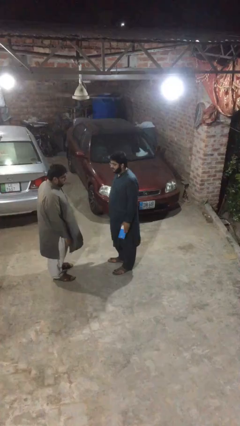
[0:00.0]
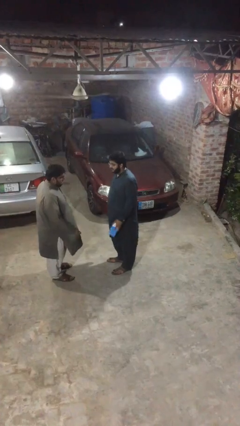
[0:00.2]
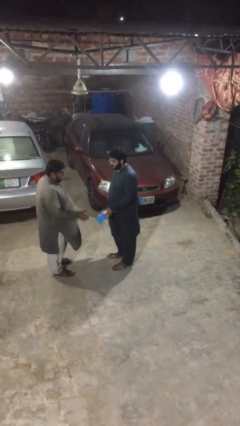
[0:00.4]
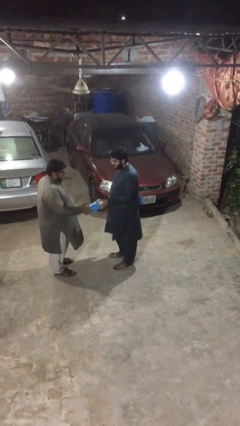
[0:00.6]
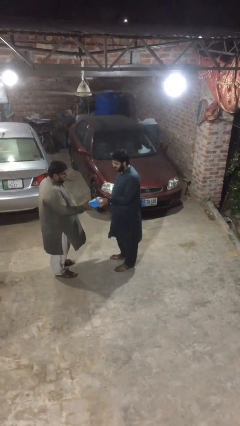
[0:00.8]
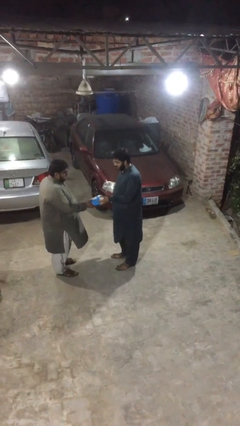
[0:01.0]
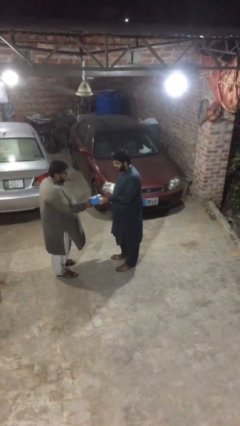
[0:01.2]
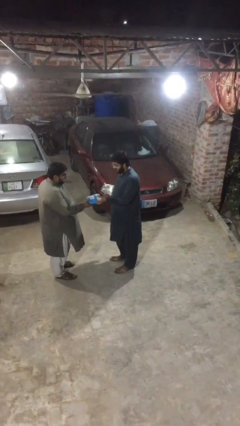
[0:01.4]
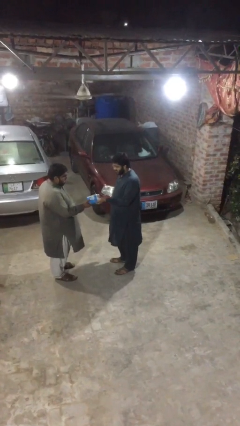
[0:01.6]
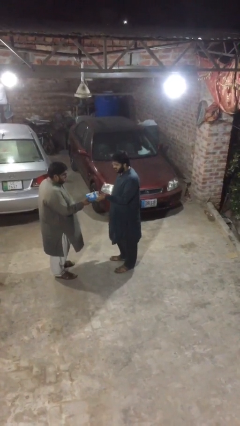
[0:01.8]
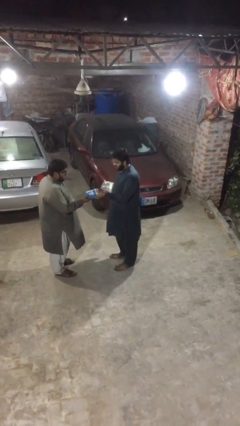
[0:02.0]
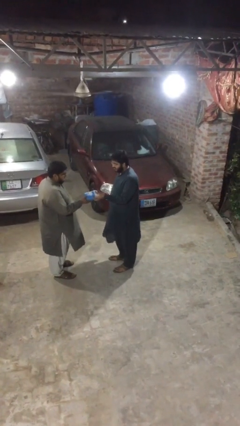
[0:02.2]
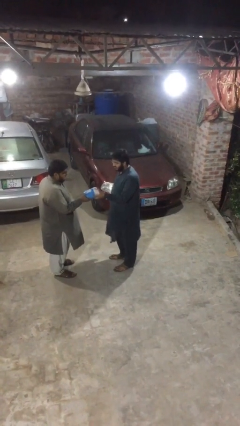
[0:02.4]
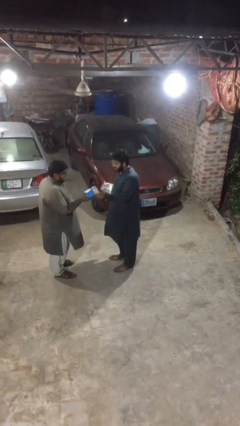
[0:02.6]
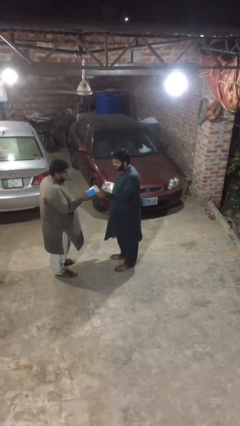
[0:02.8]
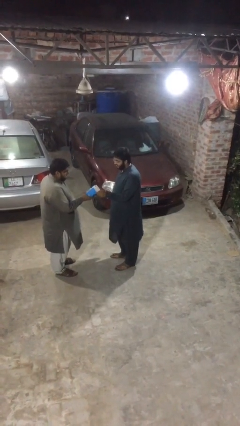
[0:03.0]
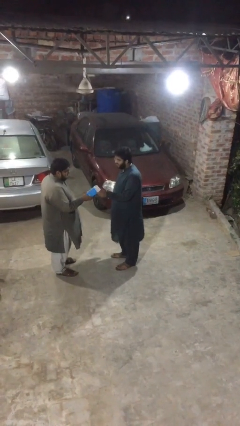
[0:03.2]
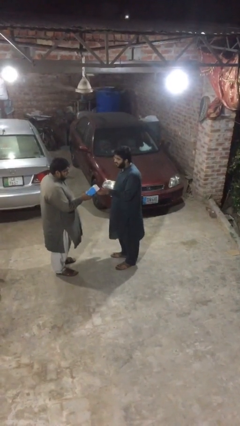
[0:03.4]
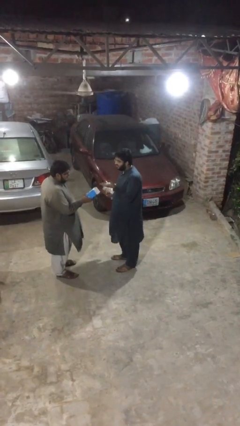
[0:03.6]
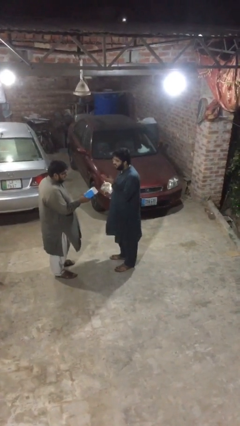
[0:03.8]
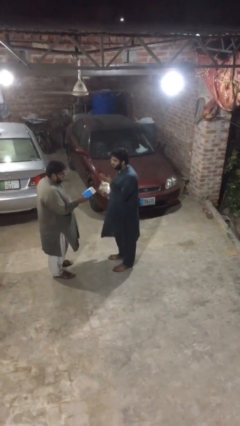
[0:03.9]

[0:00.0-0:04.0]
person transfers object to person

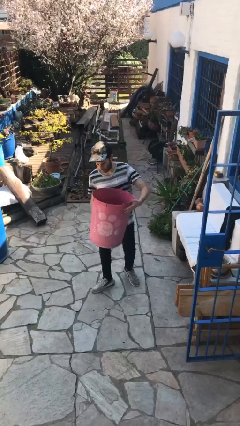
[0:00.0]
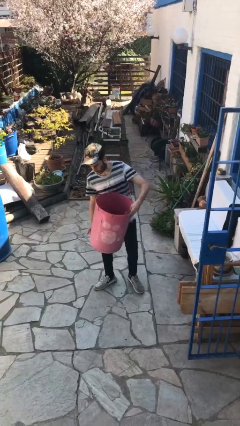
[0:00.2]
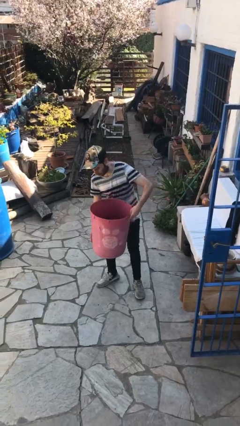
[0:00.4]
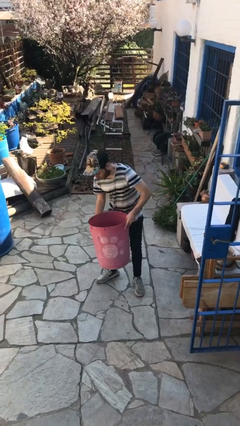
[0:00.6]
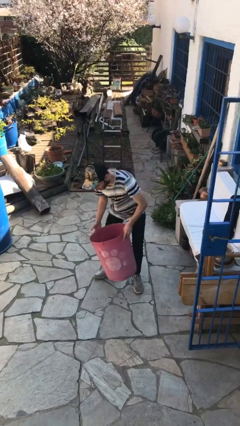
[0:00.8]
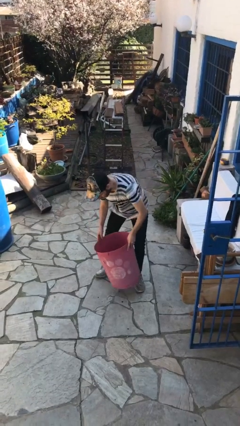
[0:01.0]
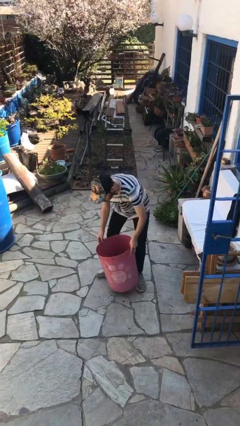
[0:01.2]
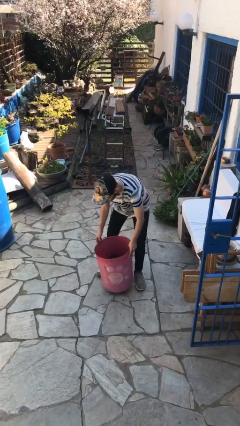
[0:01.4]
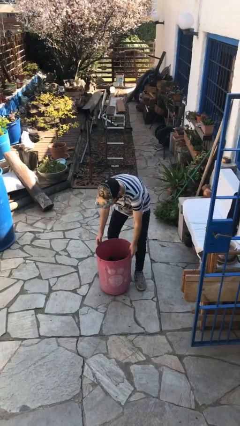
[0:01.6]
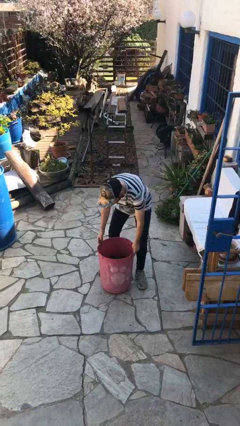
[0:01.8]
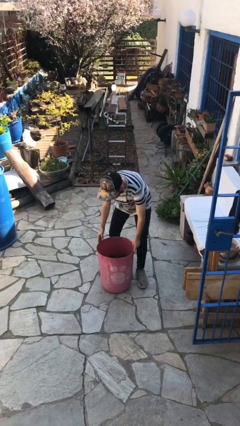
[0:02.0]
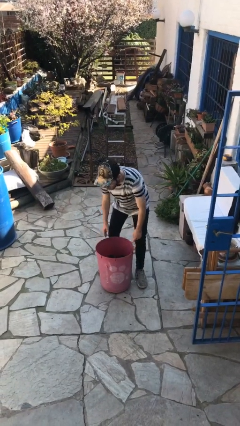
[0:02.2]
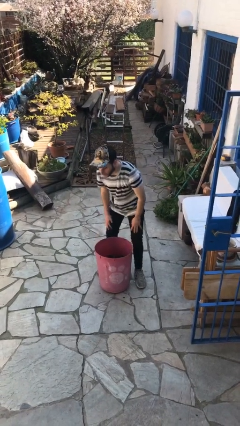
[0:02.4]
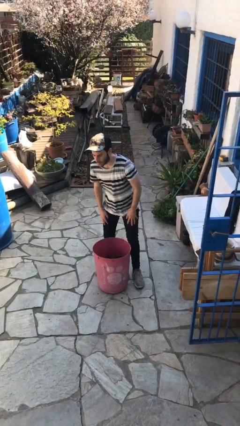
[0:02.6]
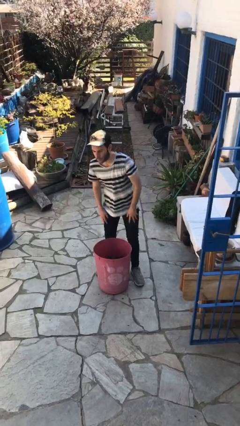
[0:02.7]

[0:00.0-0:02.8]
person puts down object on floor

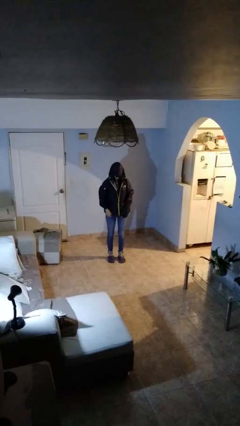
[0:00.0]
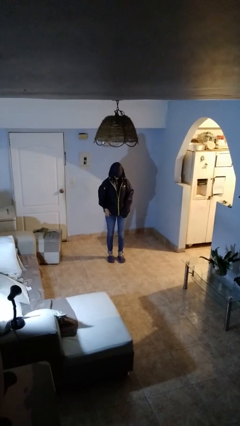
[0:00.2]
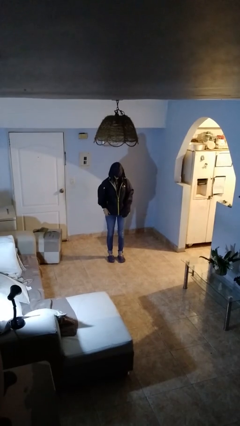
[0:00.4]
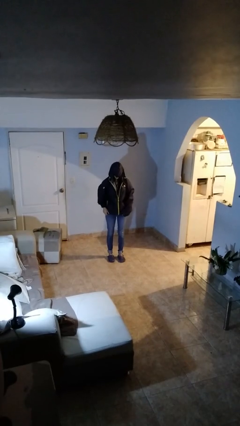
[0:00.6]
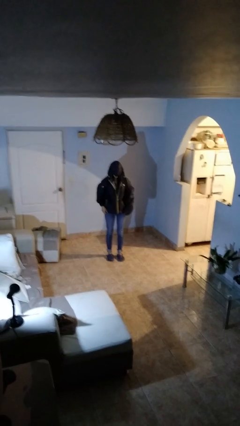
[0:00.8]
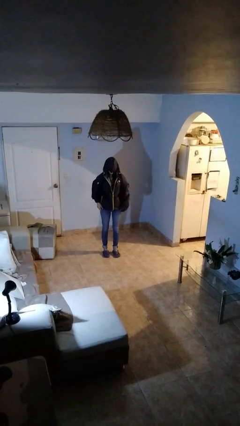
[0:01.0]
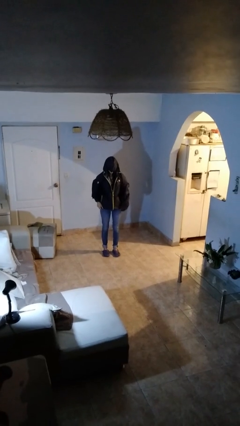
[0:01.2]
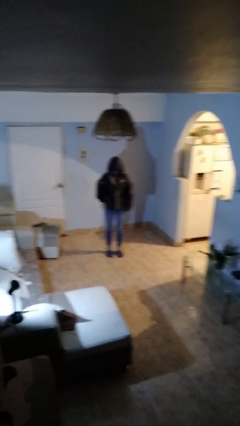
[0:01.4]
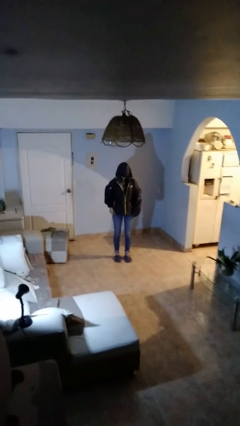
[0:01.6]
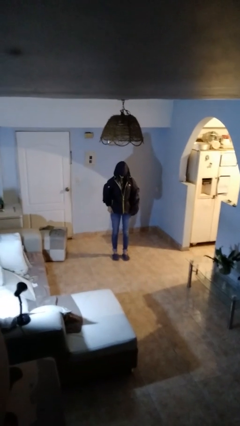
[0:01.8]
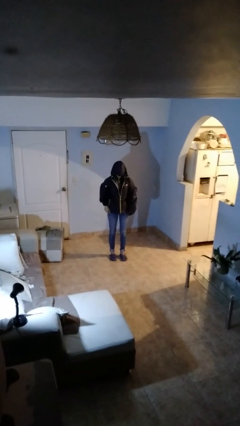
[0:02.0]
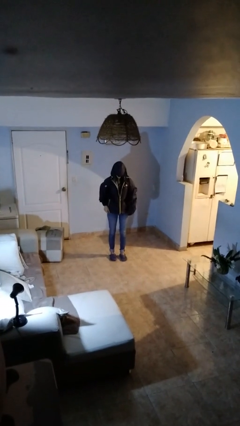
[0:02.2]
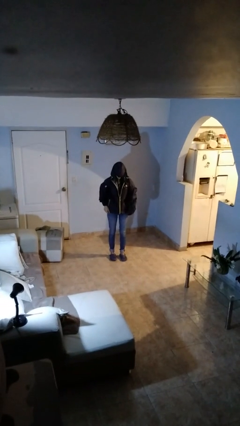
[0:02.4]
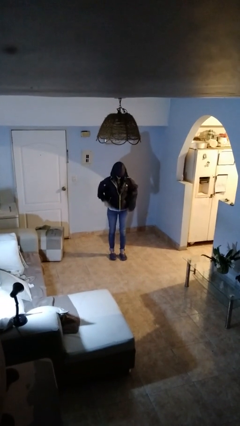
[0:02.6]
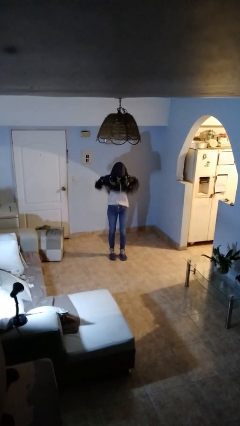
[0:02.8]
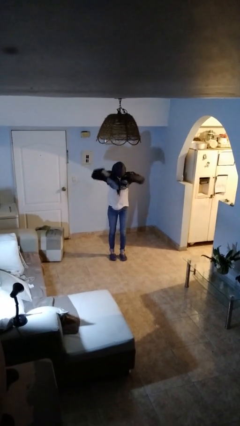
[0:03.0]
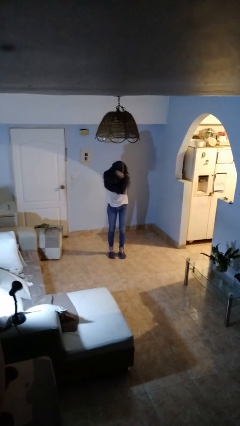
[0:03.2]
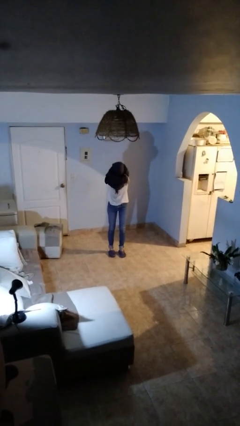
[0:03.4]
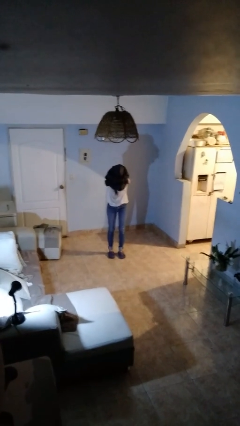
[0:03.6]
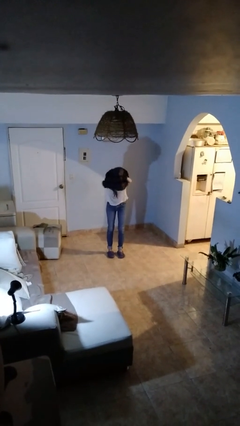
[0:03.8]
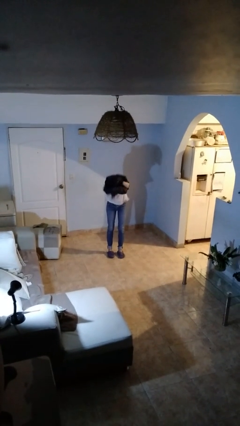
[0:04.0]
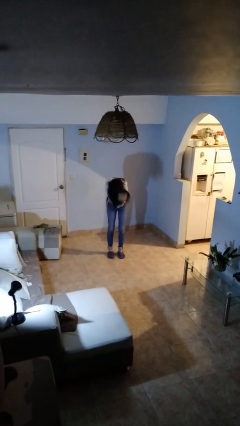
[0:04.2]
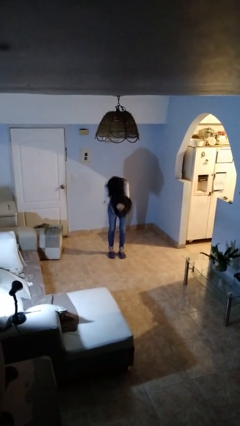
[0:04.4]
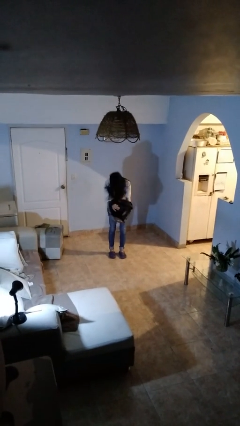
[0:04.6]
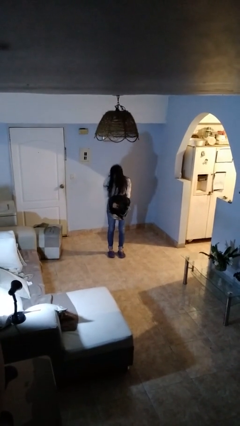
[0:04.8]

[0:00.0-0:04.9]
person takes off hoodie

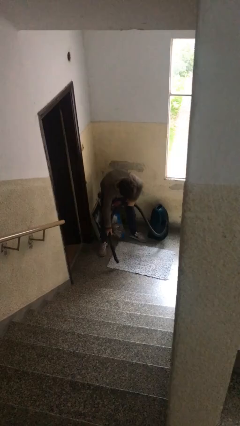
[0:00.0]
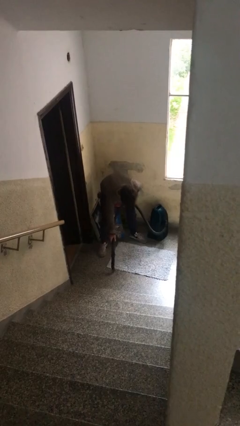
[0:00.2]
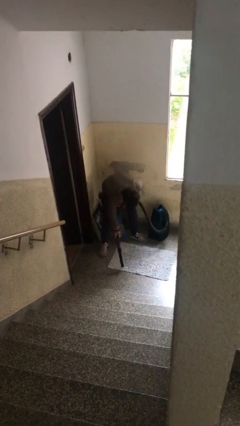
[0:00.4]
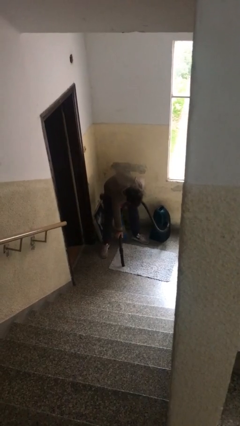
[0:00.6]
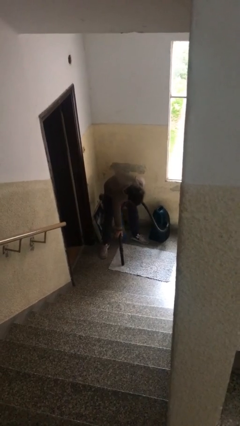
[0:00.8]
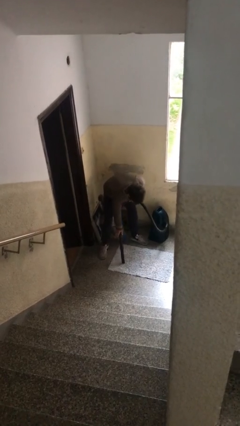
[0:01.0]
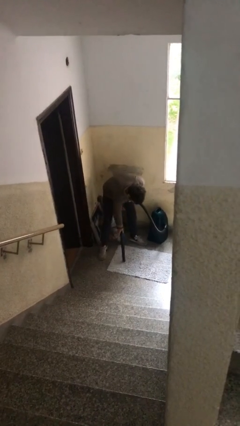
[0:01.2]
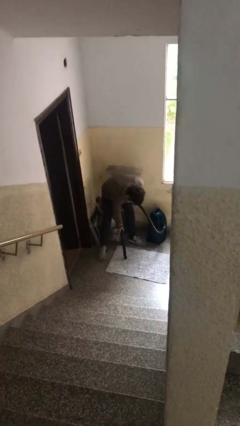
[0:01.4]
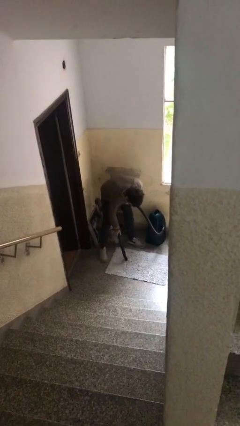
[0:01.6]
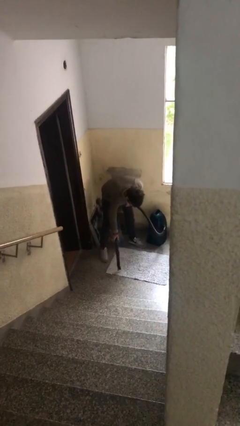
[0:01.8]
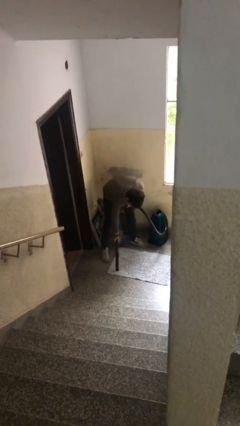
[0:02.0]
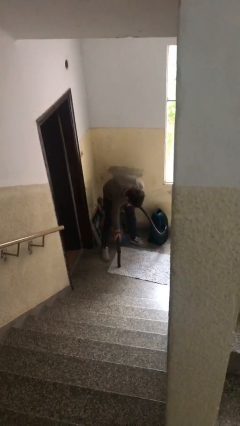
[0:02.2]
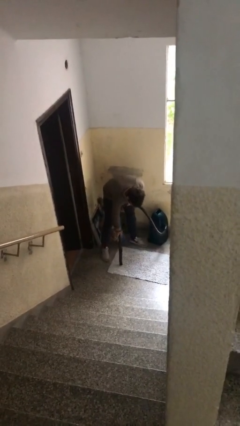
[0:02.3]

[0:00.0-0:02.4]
person vacuums carpet

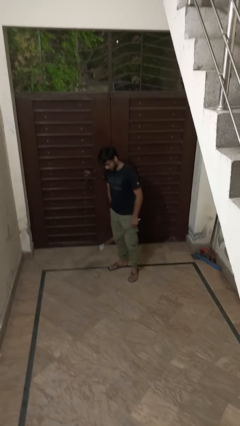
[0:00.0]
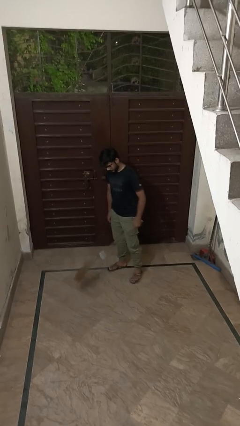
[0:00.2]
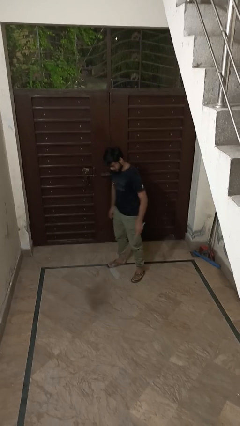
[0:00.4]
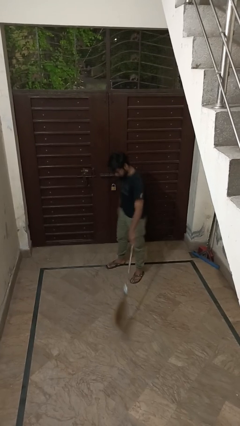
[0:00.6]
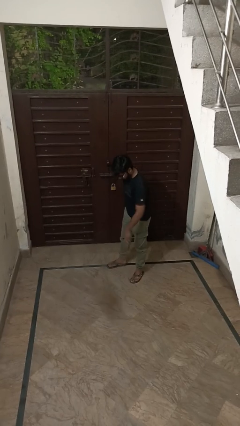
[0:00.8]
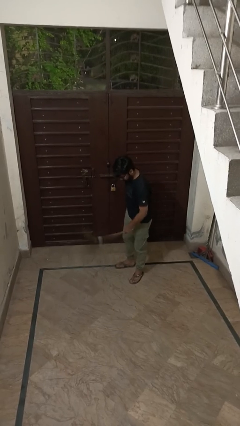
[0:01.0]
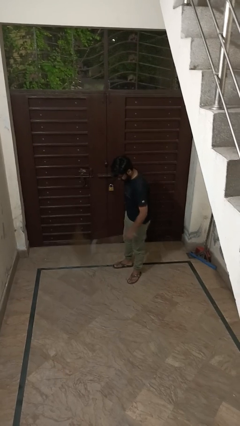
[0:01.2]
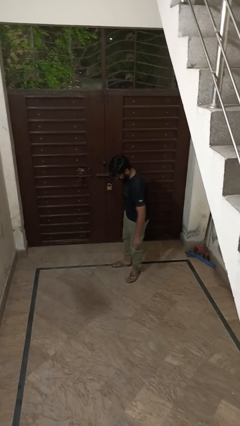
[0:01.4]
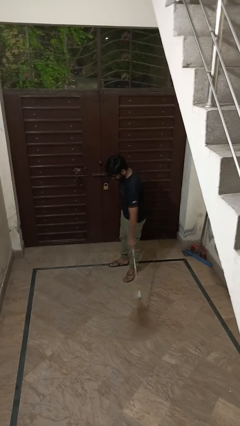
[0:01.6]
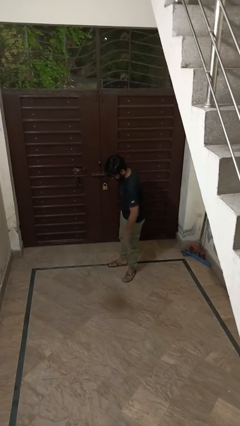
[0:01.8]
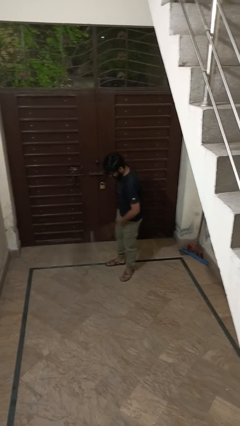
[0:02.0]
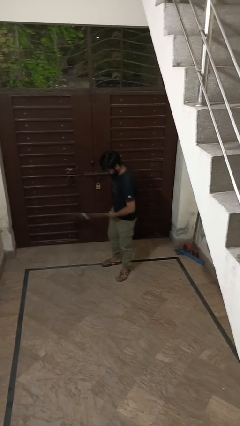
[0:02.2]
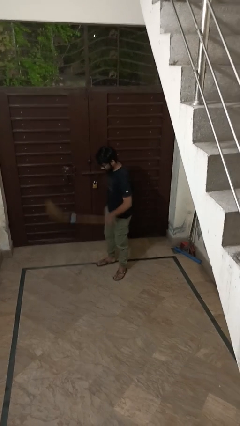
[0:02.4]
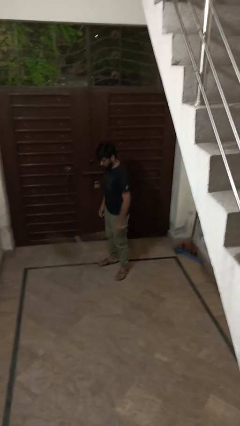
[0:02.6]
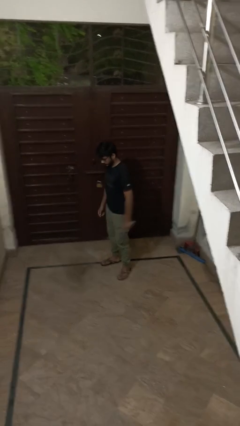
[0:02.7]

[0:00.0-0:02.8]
person sweeps floor

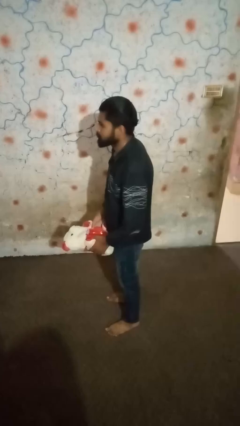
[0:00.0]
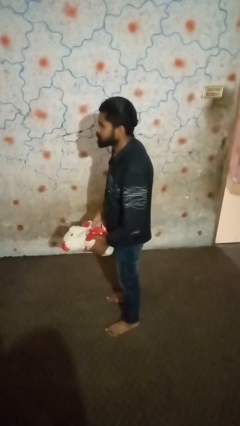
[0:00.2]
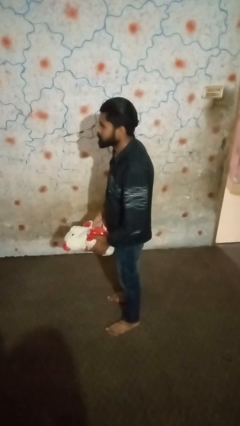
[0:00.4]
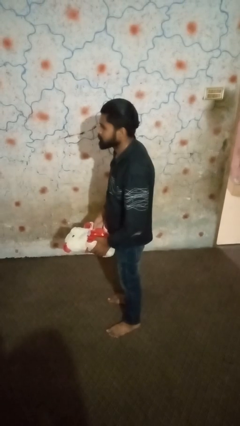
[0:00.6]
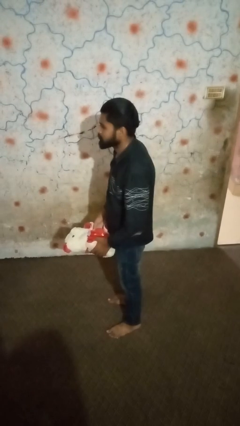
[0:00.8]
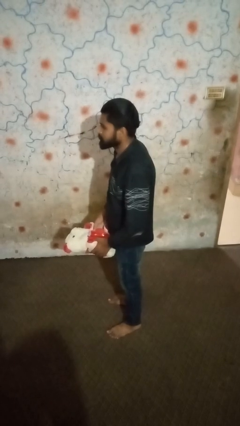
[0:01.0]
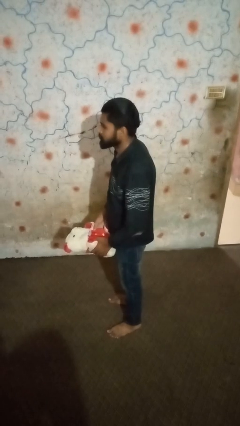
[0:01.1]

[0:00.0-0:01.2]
person hugs stuffed animal
